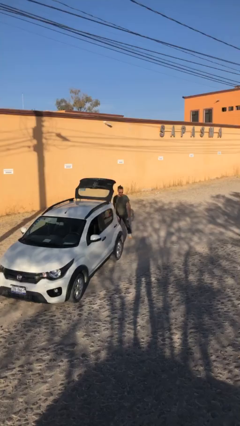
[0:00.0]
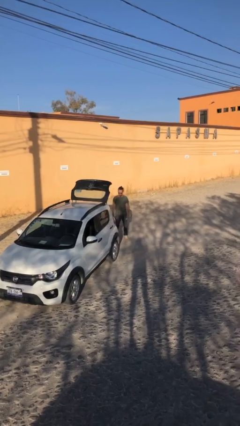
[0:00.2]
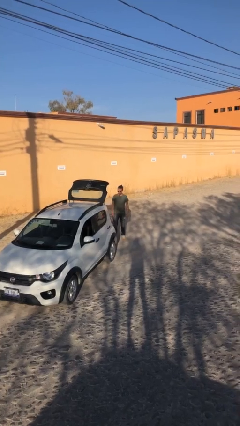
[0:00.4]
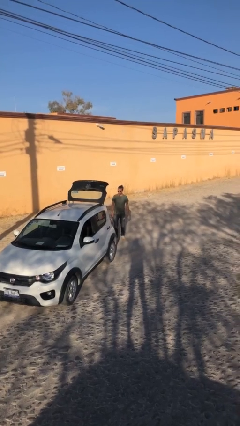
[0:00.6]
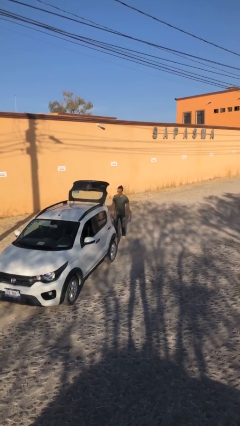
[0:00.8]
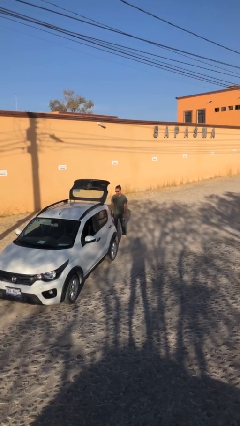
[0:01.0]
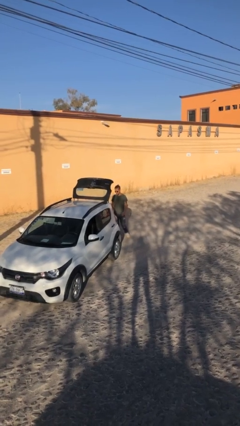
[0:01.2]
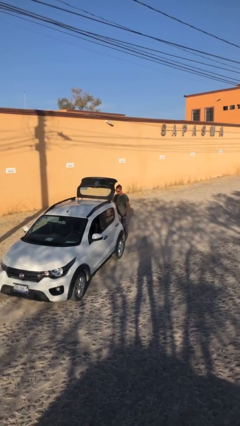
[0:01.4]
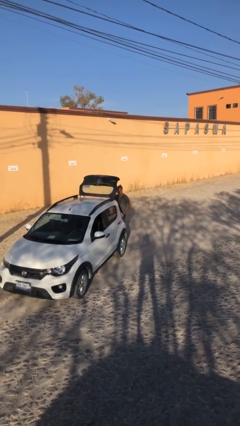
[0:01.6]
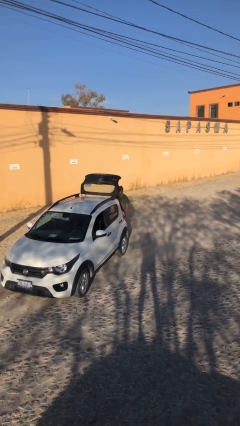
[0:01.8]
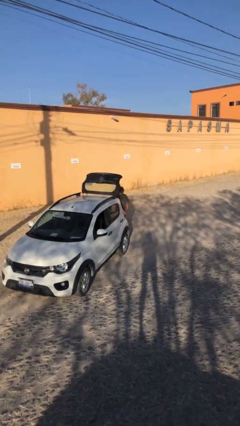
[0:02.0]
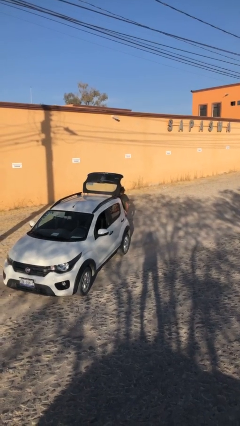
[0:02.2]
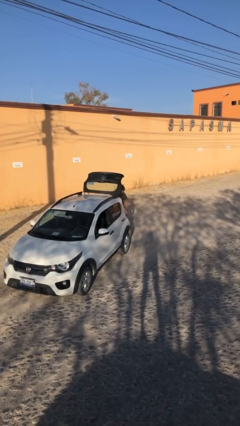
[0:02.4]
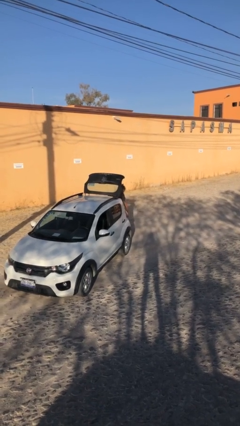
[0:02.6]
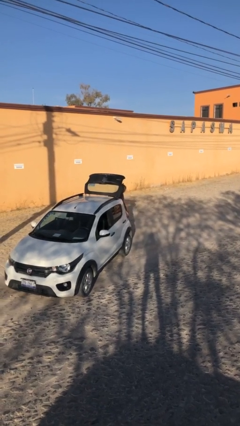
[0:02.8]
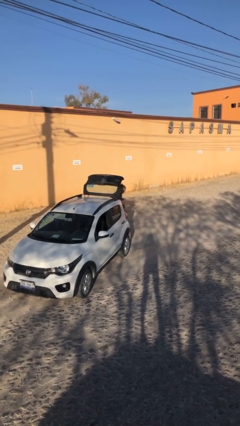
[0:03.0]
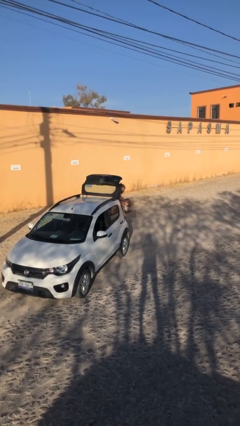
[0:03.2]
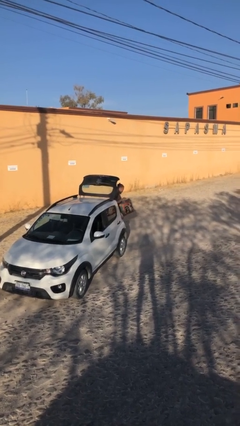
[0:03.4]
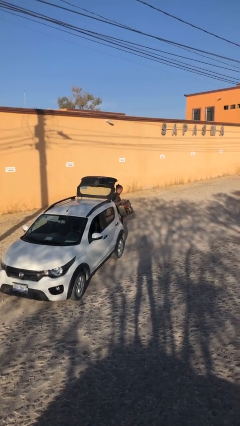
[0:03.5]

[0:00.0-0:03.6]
person unloads car

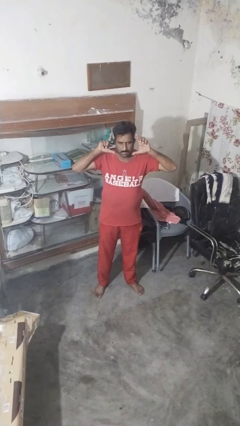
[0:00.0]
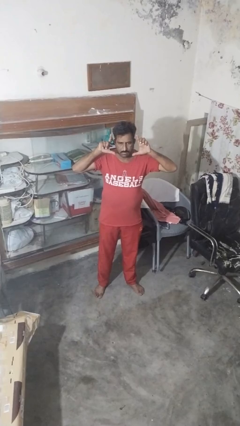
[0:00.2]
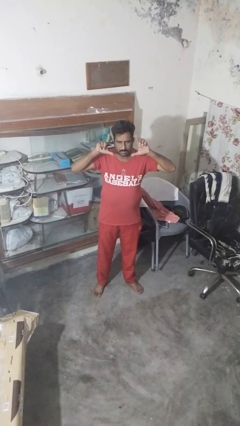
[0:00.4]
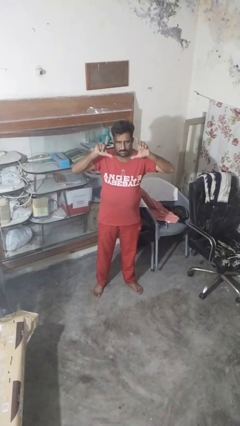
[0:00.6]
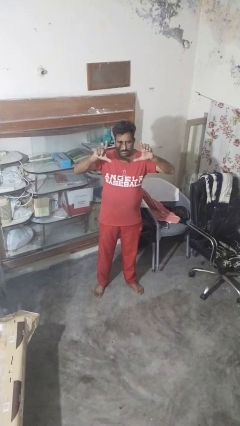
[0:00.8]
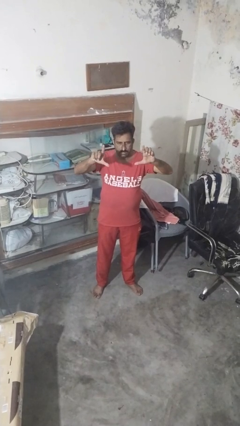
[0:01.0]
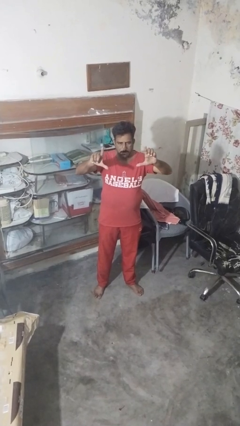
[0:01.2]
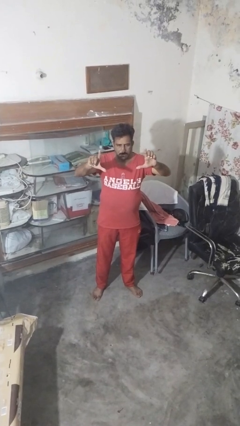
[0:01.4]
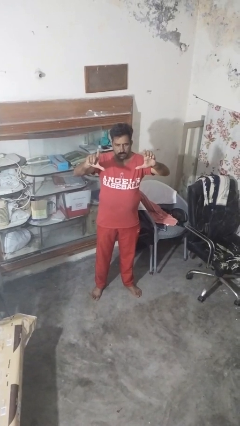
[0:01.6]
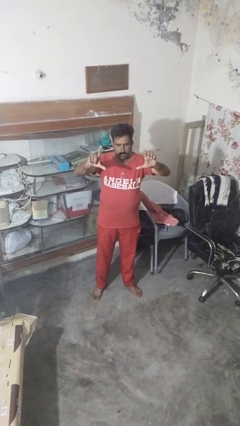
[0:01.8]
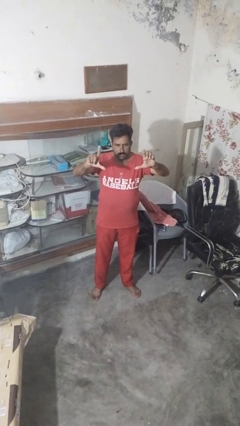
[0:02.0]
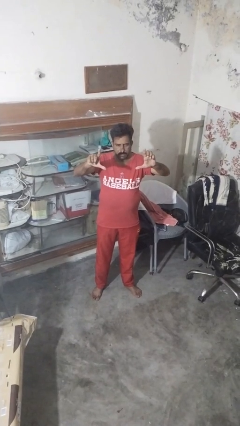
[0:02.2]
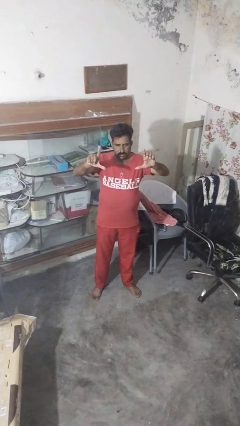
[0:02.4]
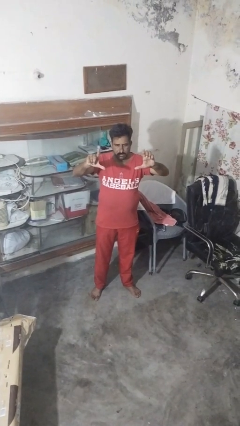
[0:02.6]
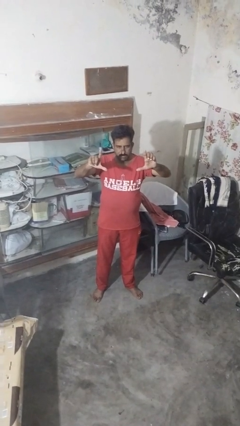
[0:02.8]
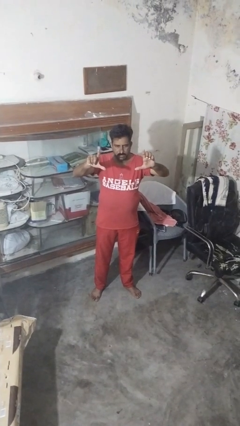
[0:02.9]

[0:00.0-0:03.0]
person gestures zoom out

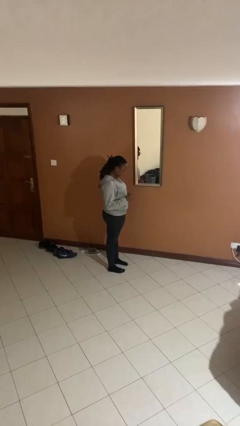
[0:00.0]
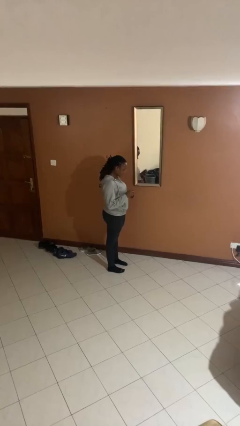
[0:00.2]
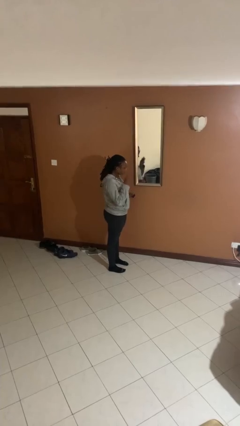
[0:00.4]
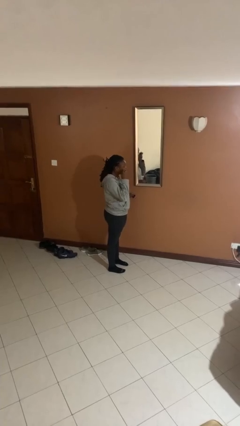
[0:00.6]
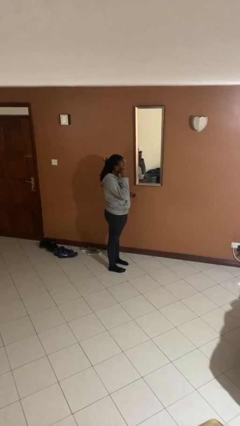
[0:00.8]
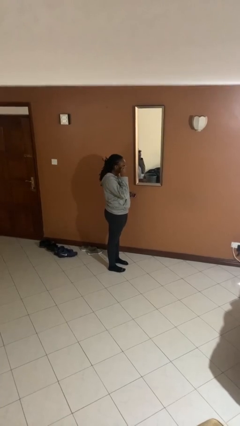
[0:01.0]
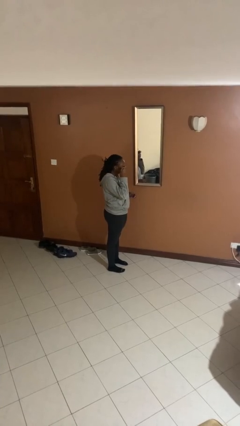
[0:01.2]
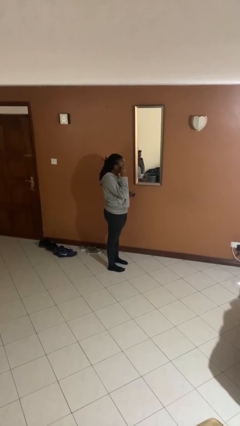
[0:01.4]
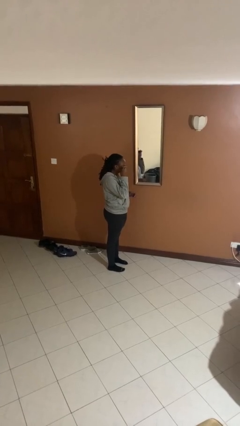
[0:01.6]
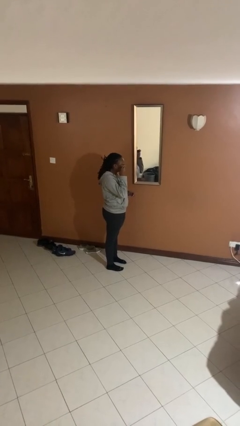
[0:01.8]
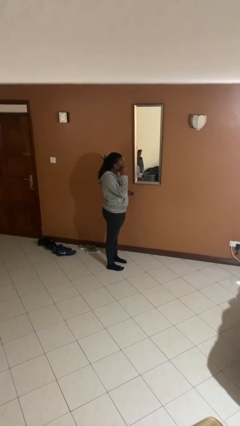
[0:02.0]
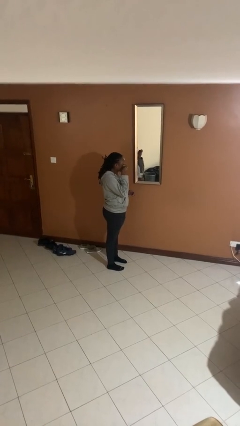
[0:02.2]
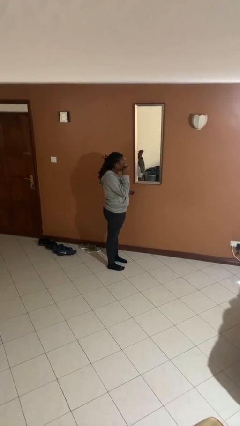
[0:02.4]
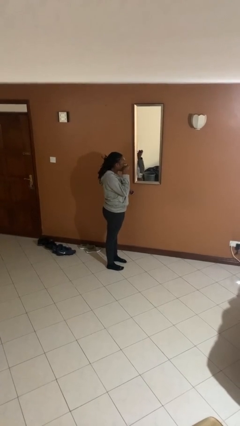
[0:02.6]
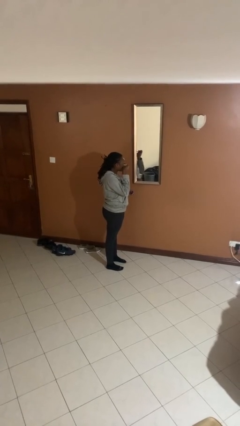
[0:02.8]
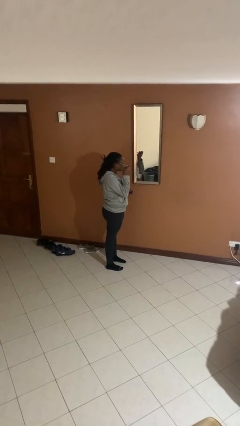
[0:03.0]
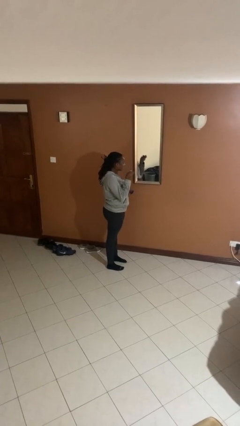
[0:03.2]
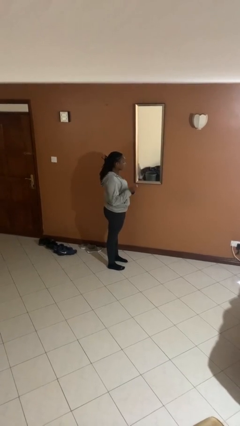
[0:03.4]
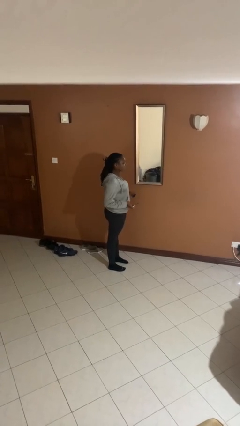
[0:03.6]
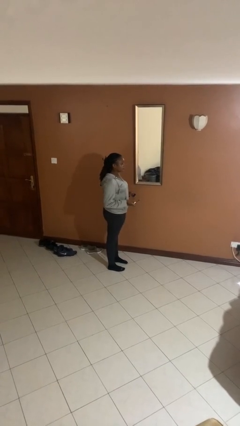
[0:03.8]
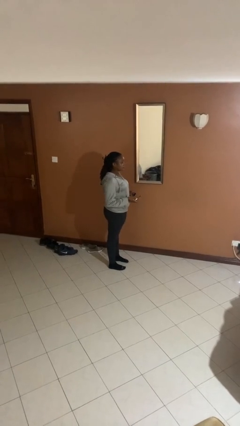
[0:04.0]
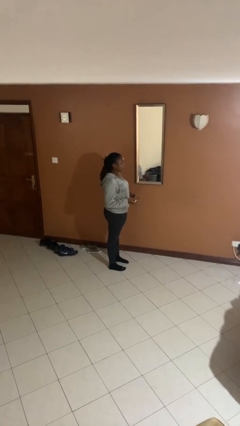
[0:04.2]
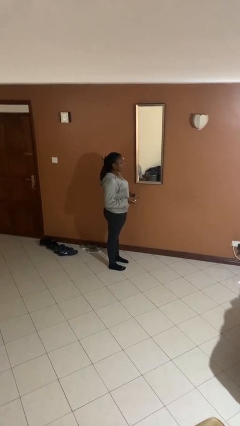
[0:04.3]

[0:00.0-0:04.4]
person applies eye makeup

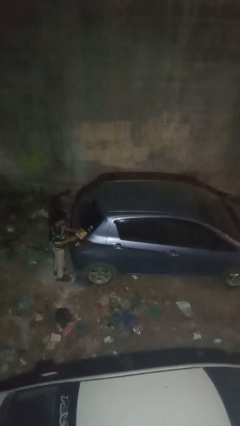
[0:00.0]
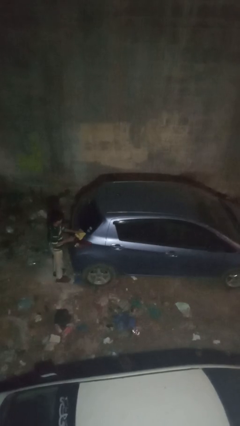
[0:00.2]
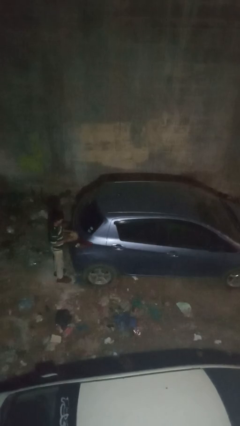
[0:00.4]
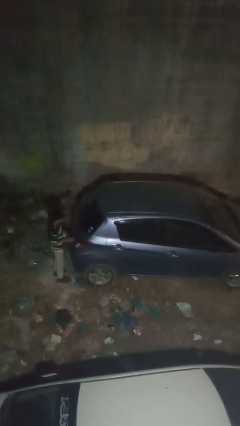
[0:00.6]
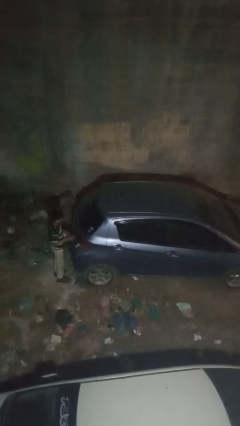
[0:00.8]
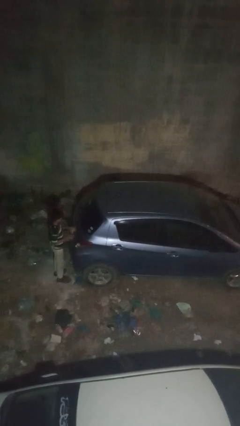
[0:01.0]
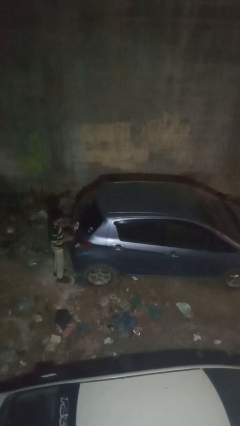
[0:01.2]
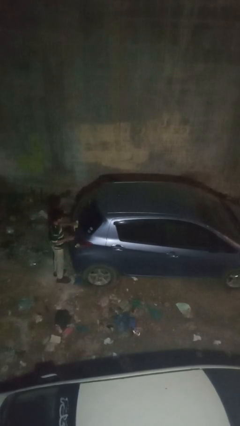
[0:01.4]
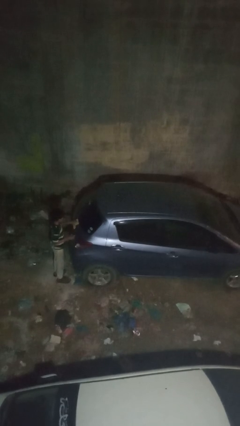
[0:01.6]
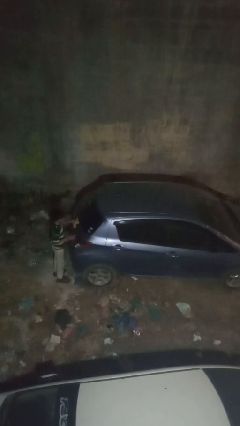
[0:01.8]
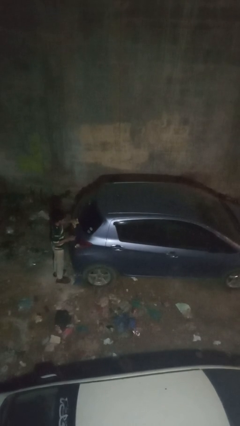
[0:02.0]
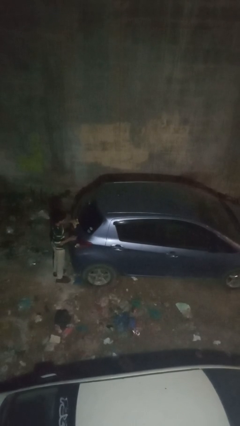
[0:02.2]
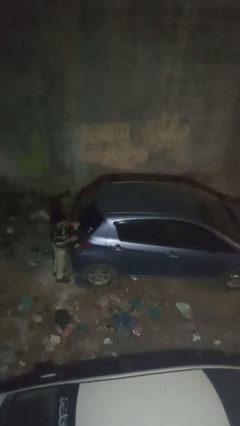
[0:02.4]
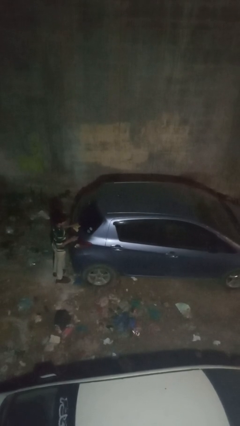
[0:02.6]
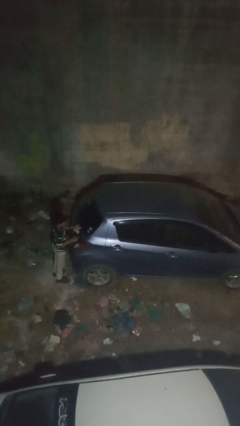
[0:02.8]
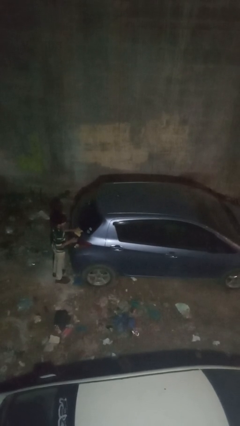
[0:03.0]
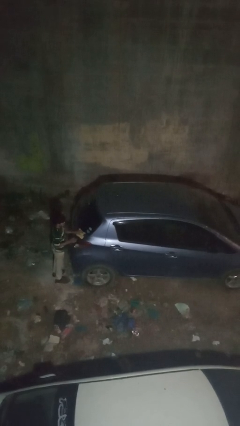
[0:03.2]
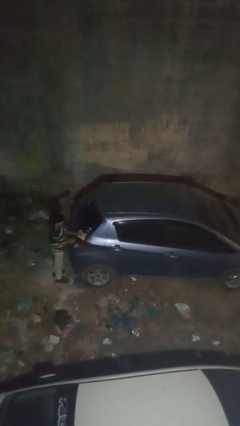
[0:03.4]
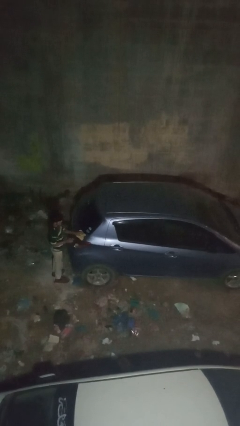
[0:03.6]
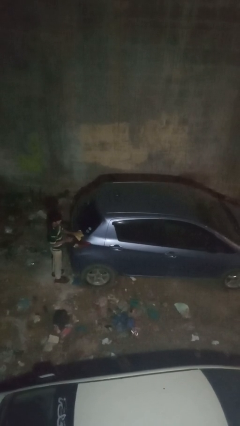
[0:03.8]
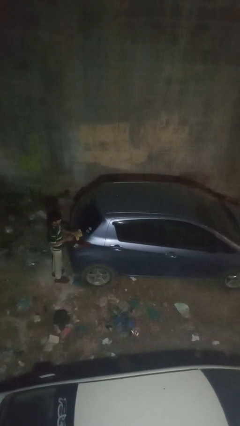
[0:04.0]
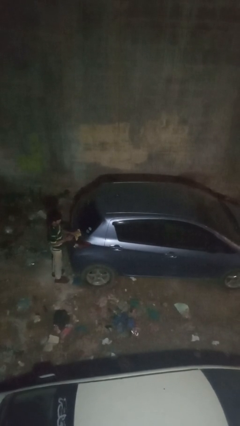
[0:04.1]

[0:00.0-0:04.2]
person polishes car with rag

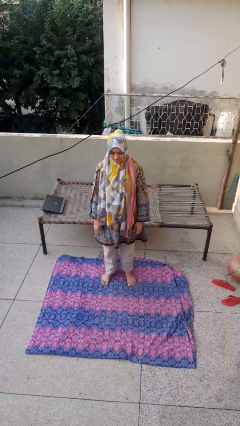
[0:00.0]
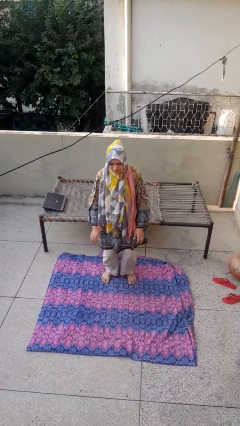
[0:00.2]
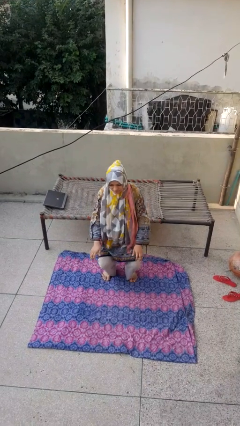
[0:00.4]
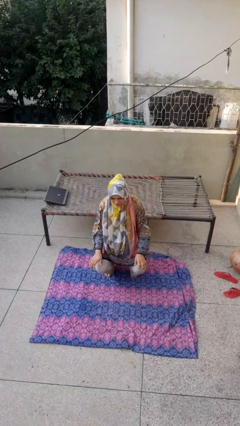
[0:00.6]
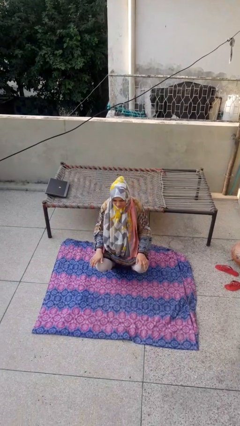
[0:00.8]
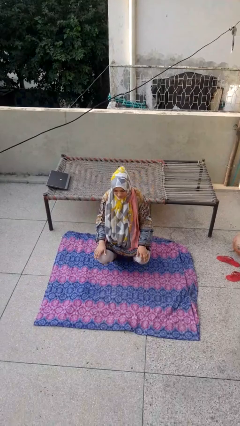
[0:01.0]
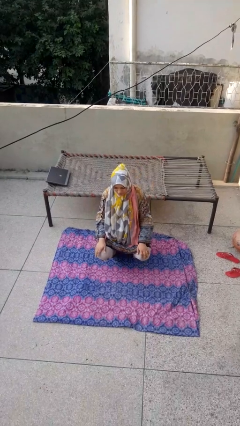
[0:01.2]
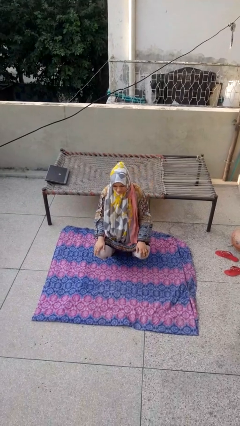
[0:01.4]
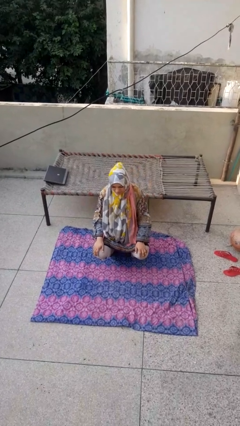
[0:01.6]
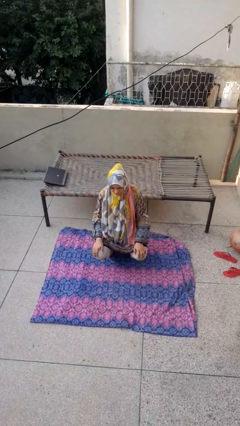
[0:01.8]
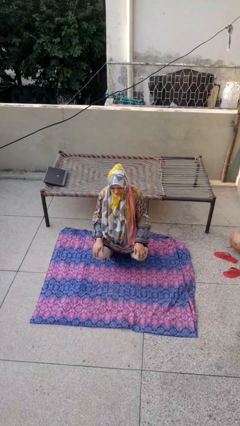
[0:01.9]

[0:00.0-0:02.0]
person squats

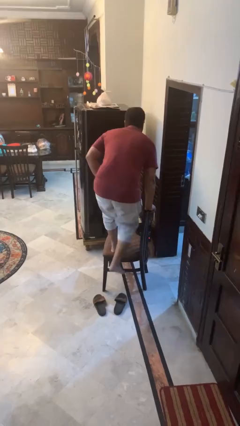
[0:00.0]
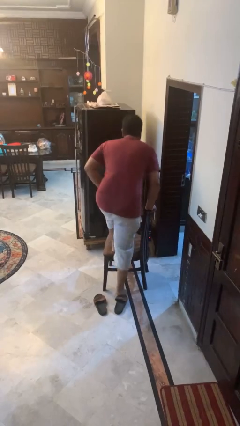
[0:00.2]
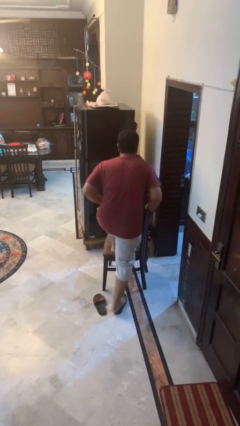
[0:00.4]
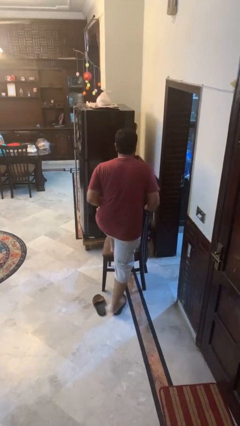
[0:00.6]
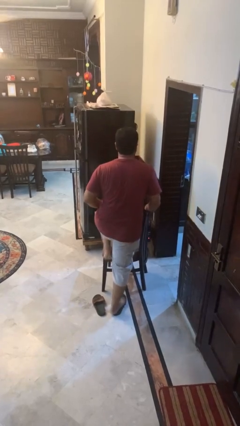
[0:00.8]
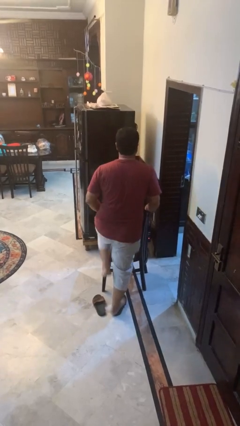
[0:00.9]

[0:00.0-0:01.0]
person climbs off chair
